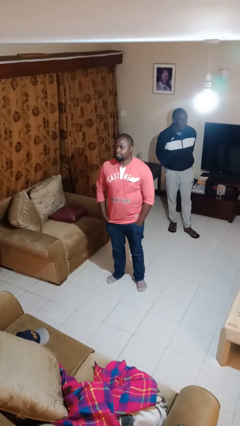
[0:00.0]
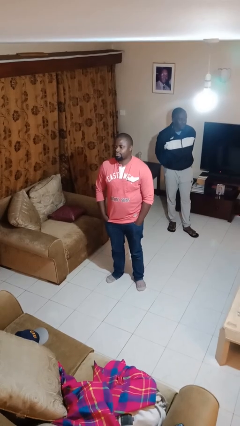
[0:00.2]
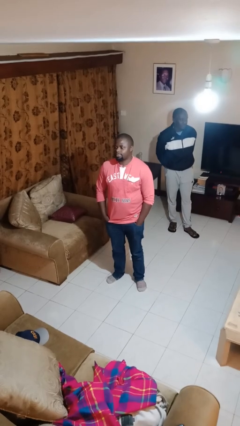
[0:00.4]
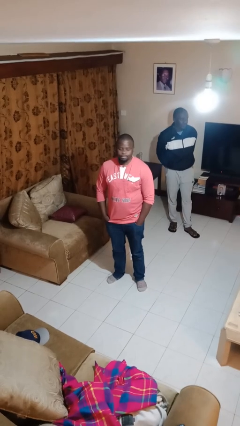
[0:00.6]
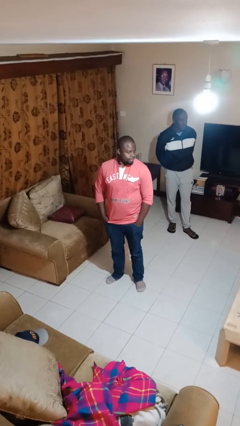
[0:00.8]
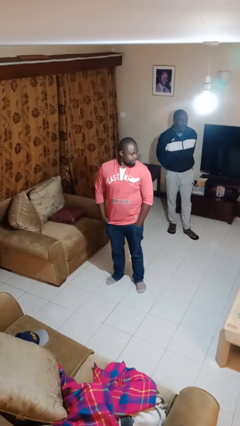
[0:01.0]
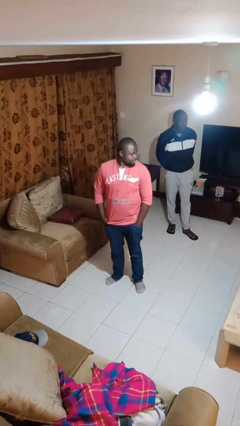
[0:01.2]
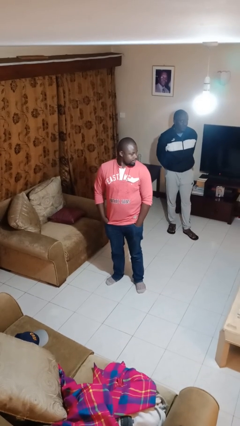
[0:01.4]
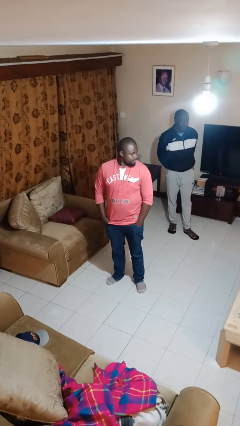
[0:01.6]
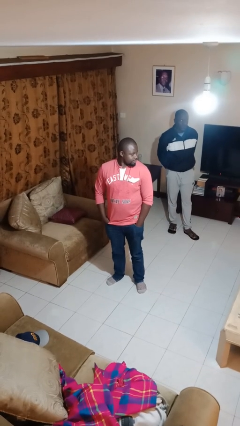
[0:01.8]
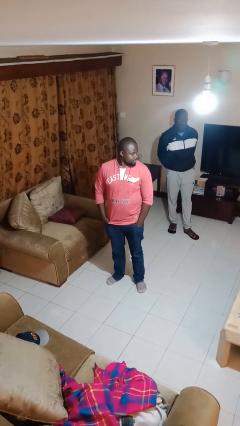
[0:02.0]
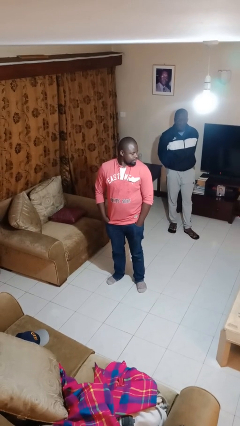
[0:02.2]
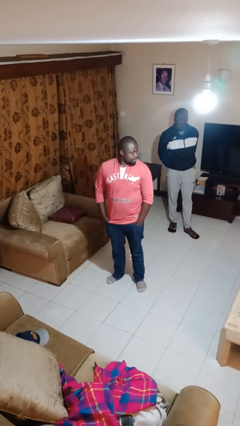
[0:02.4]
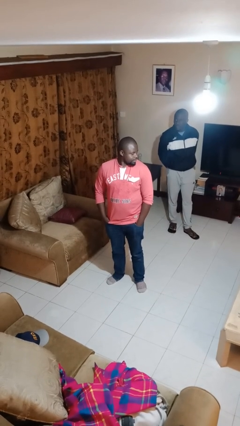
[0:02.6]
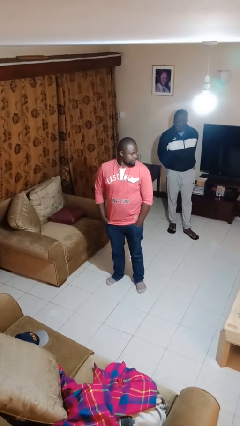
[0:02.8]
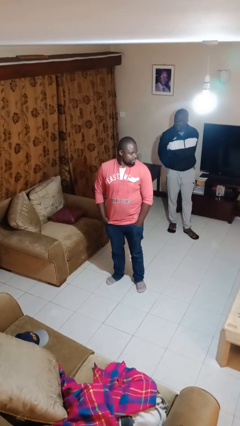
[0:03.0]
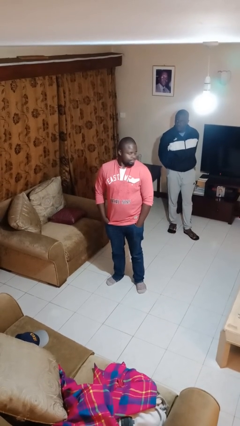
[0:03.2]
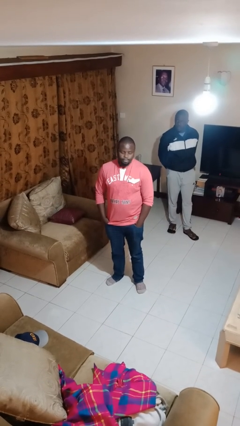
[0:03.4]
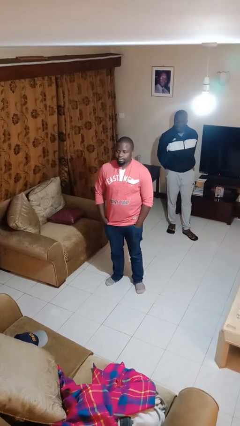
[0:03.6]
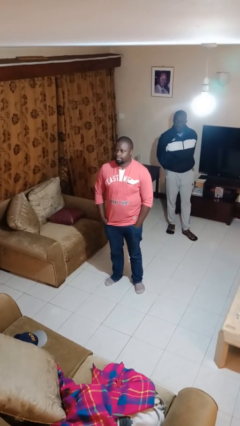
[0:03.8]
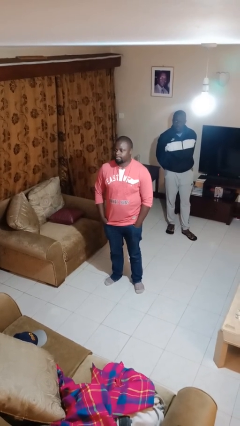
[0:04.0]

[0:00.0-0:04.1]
person looks over shoulder

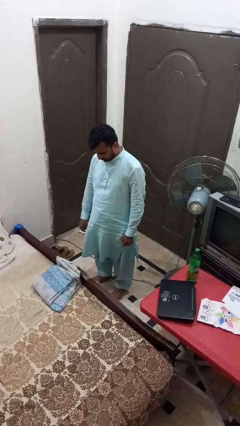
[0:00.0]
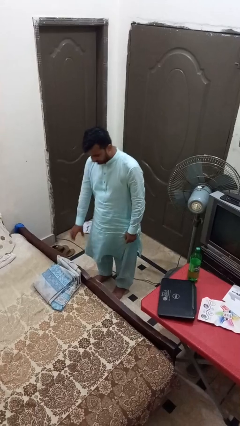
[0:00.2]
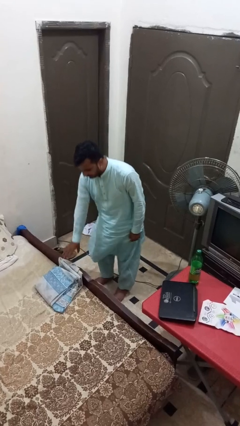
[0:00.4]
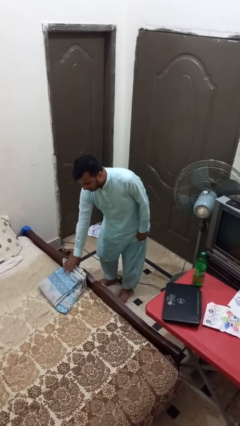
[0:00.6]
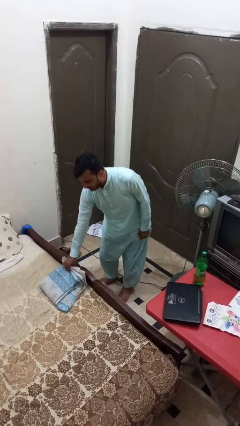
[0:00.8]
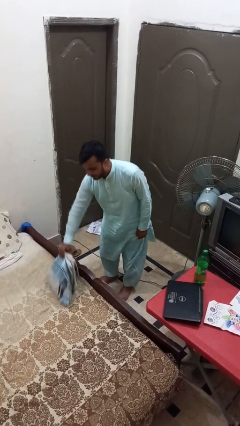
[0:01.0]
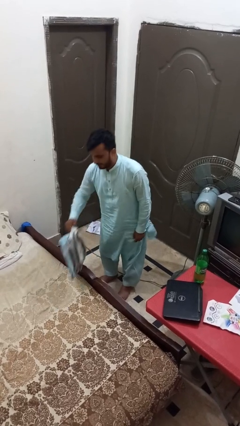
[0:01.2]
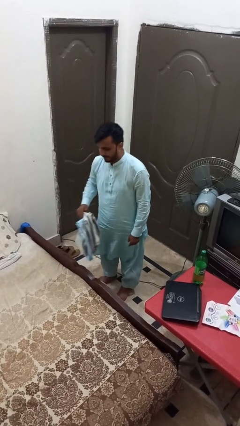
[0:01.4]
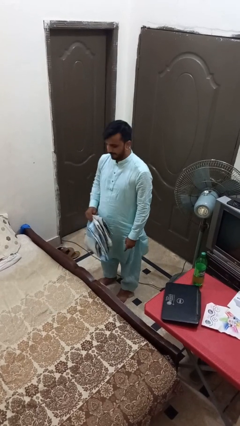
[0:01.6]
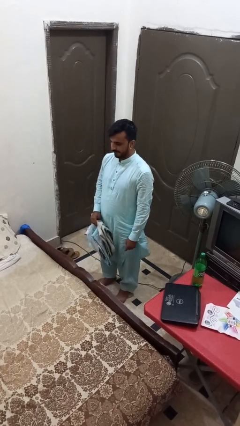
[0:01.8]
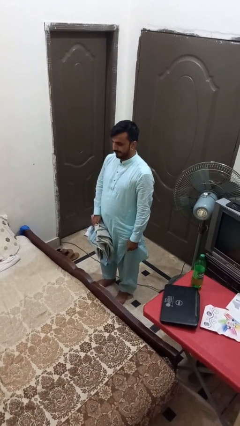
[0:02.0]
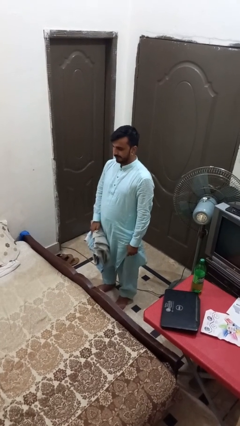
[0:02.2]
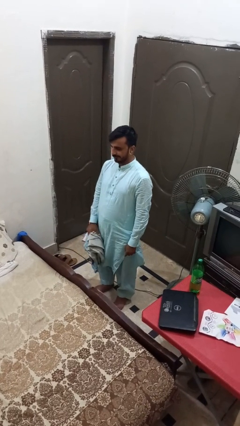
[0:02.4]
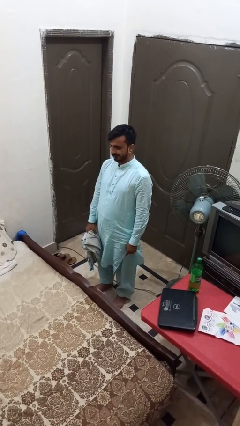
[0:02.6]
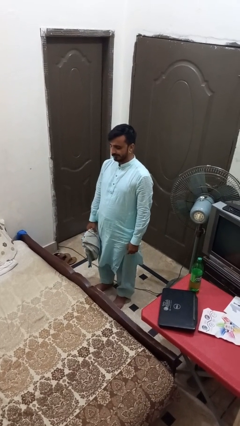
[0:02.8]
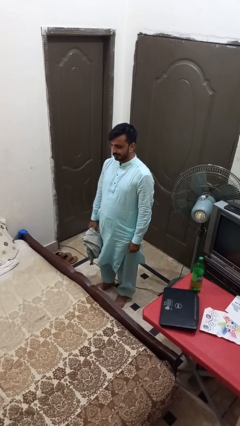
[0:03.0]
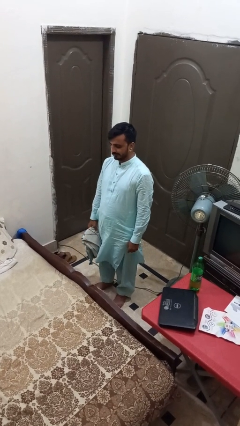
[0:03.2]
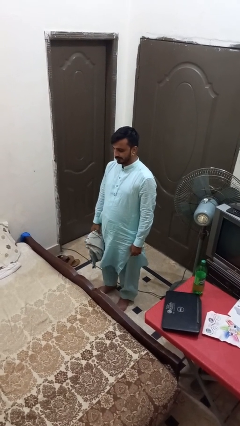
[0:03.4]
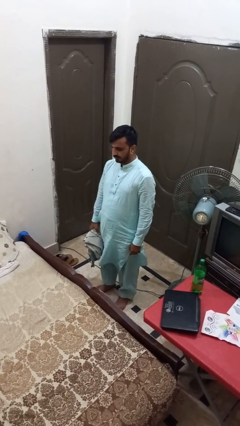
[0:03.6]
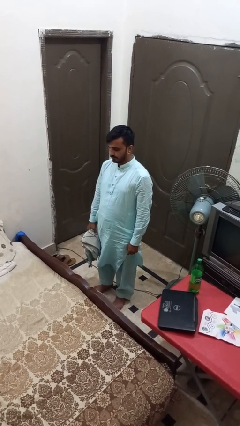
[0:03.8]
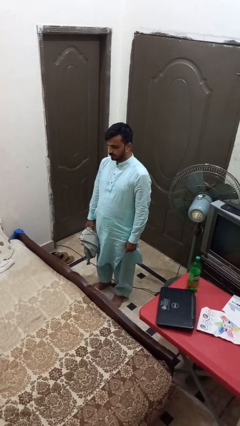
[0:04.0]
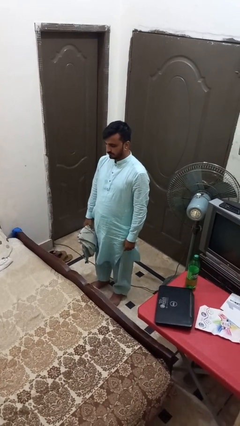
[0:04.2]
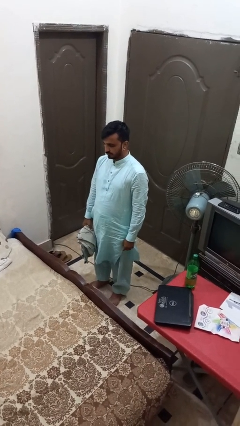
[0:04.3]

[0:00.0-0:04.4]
person picks up object from bed

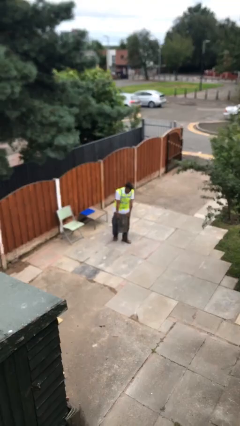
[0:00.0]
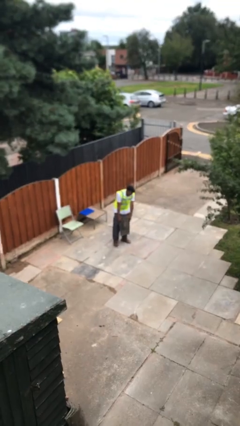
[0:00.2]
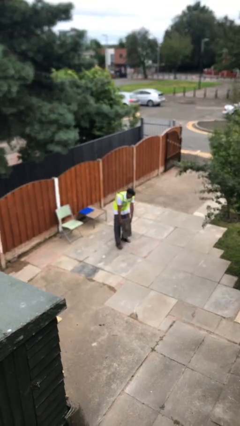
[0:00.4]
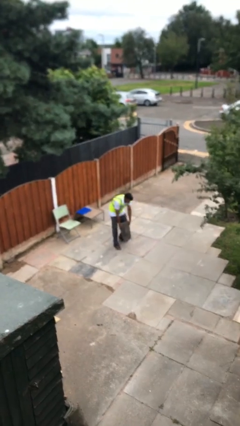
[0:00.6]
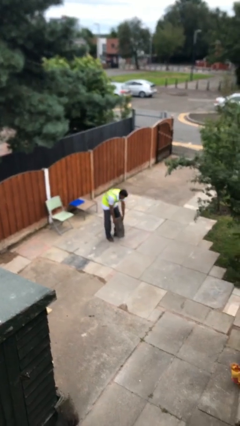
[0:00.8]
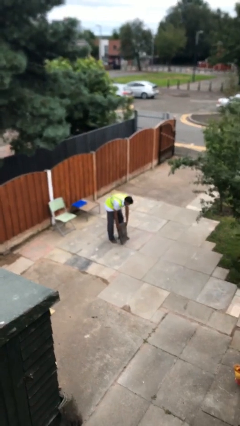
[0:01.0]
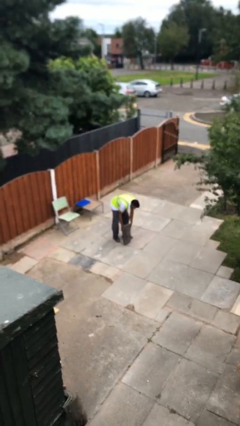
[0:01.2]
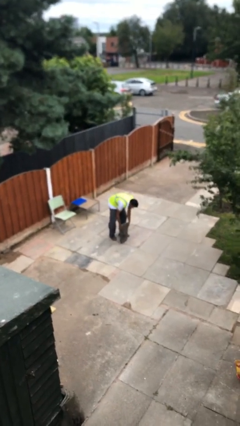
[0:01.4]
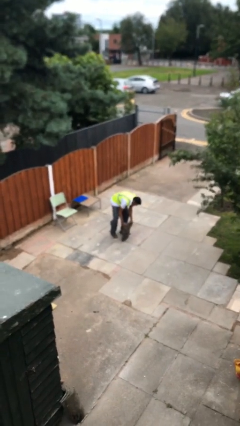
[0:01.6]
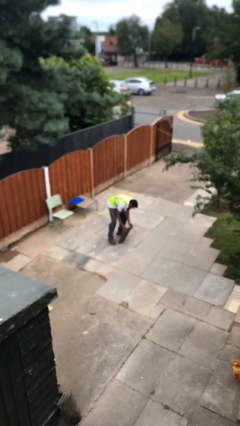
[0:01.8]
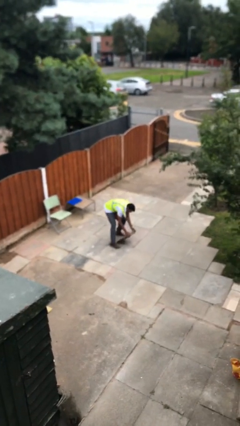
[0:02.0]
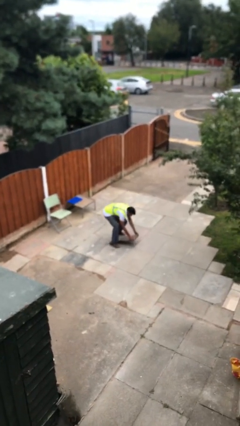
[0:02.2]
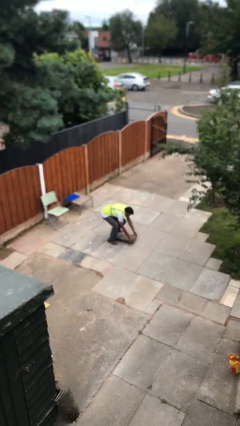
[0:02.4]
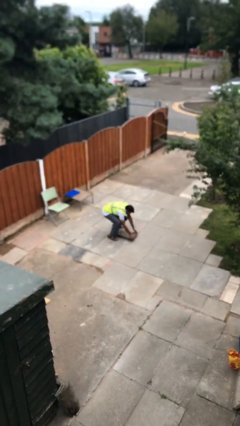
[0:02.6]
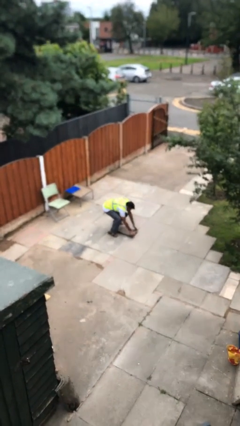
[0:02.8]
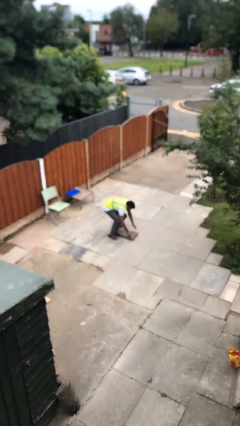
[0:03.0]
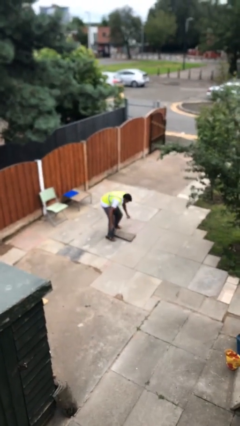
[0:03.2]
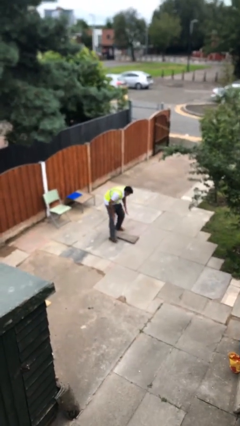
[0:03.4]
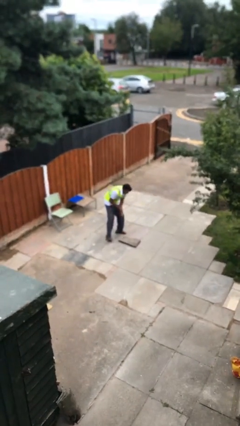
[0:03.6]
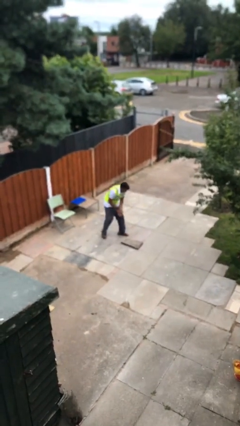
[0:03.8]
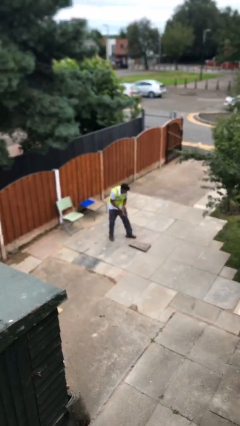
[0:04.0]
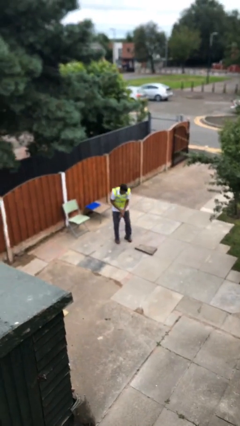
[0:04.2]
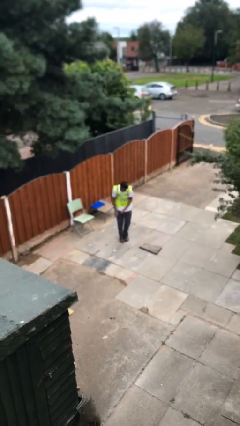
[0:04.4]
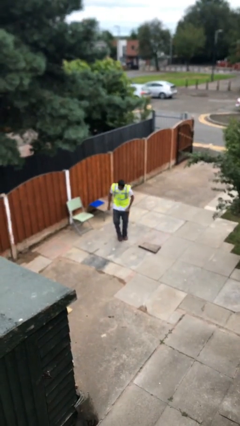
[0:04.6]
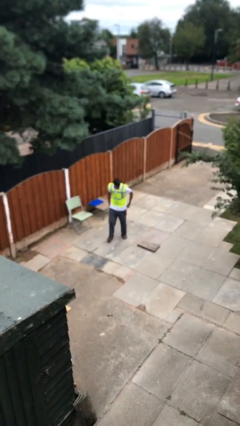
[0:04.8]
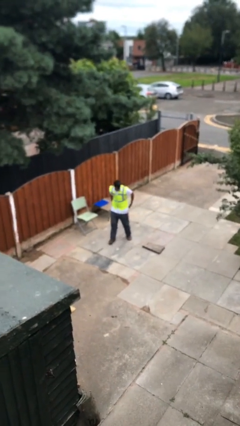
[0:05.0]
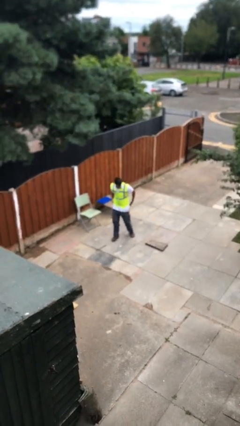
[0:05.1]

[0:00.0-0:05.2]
person puts down object on floor

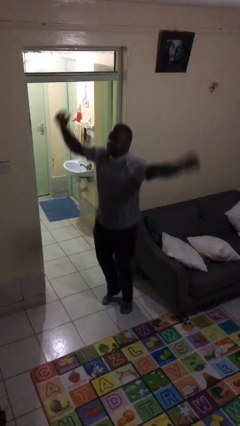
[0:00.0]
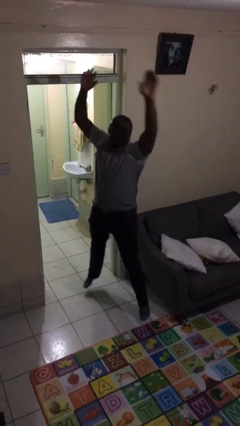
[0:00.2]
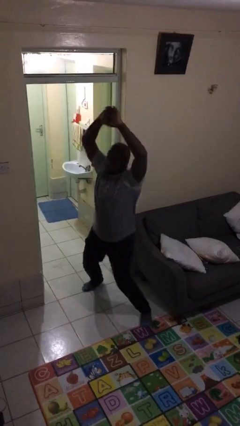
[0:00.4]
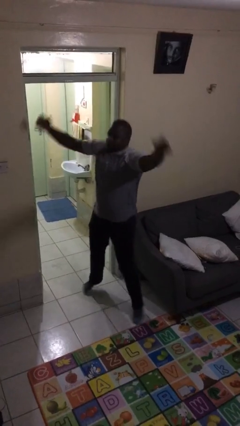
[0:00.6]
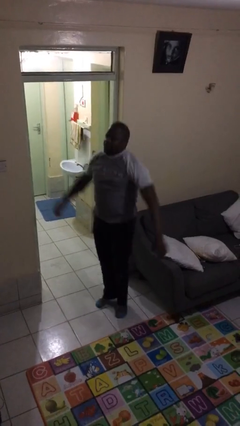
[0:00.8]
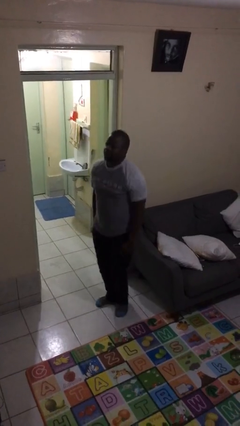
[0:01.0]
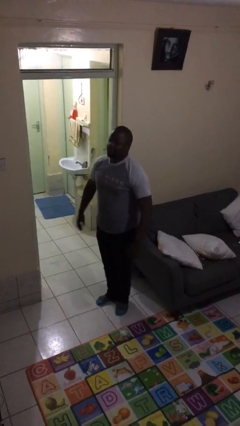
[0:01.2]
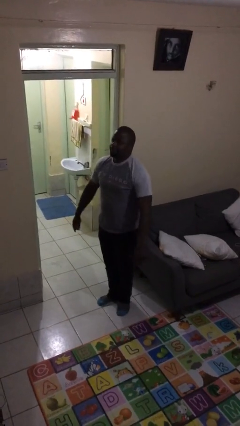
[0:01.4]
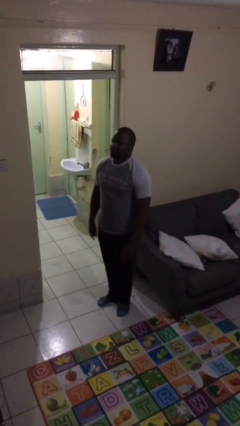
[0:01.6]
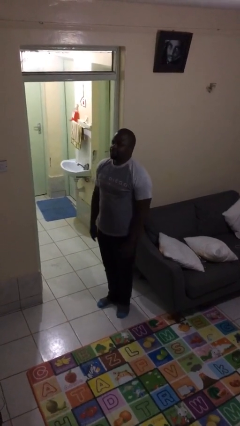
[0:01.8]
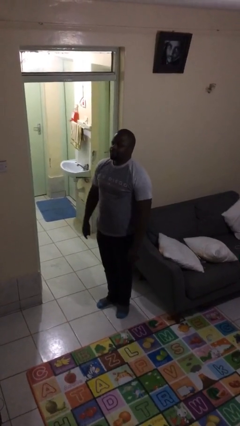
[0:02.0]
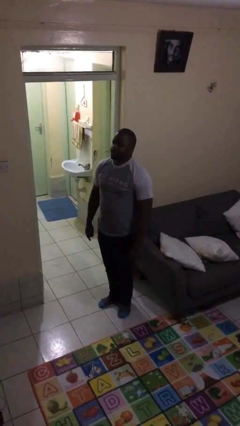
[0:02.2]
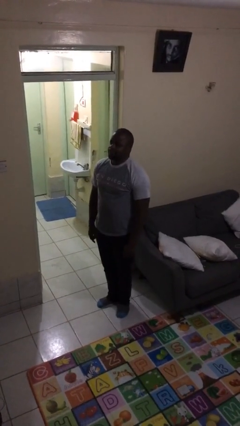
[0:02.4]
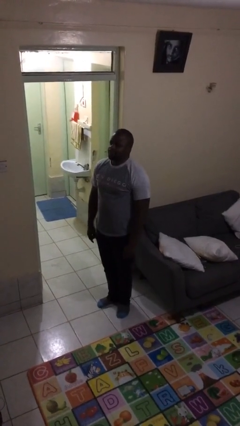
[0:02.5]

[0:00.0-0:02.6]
person exercises with jumping jacks

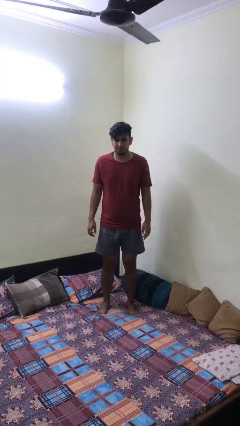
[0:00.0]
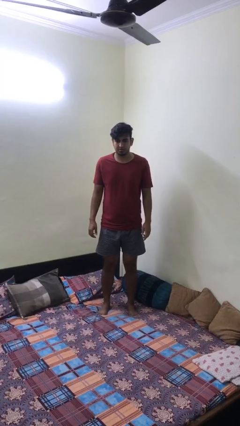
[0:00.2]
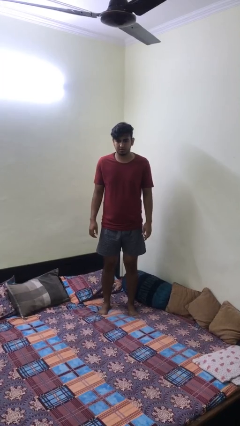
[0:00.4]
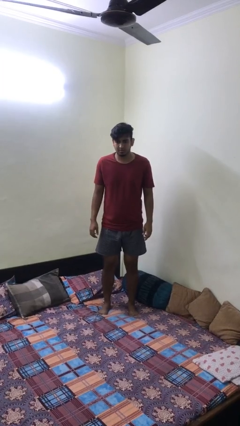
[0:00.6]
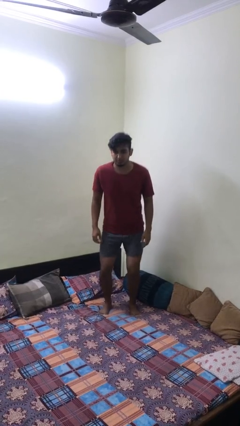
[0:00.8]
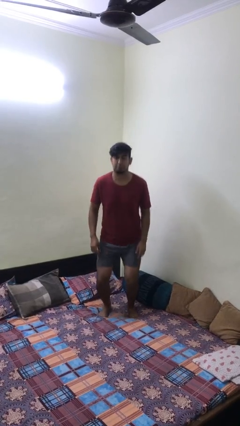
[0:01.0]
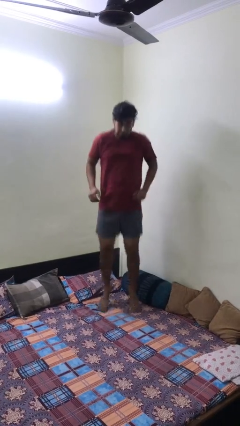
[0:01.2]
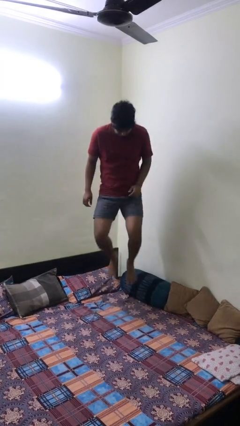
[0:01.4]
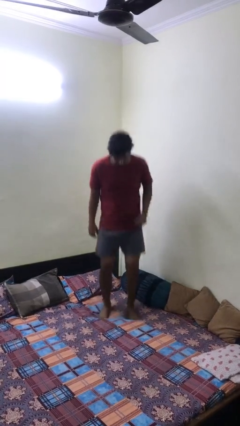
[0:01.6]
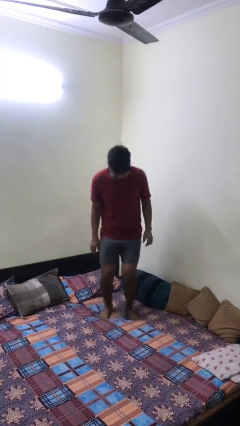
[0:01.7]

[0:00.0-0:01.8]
person jumps on bed
